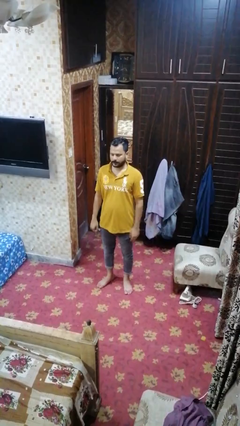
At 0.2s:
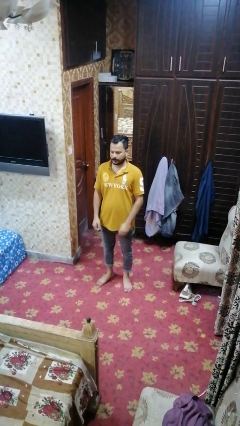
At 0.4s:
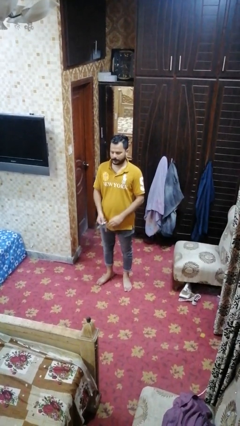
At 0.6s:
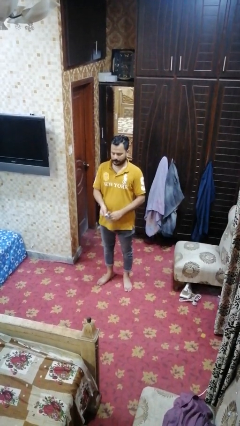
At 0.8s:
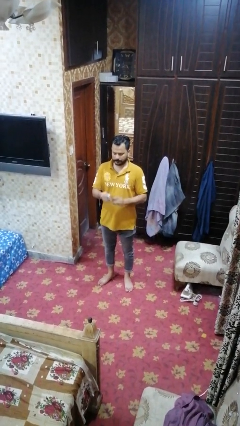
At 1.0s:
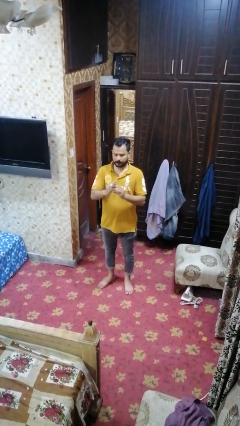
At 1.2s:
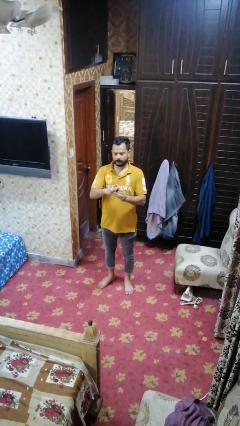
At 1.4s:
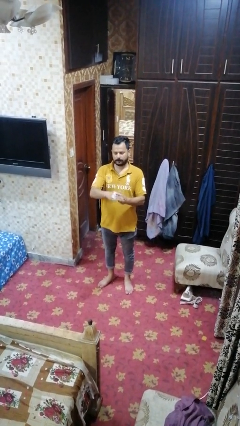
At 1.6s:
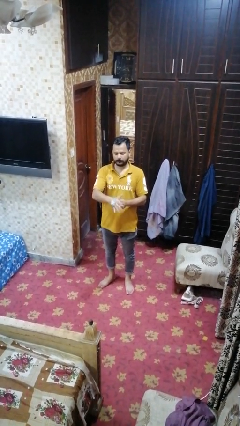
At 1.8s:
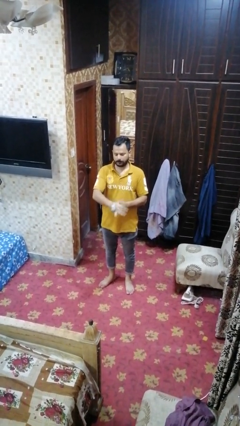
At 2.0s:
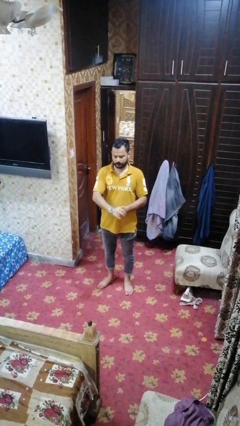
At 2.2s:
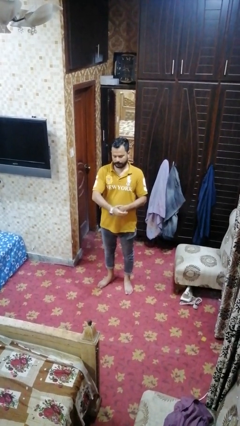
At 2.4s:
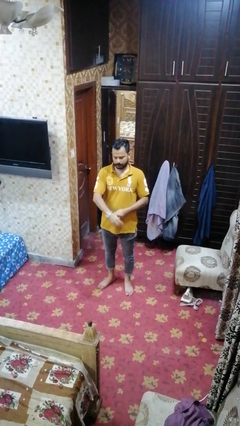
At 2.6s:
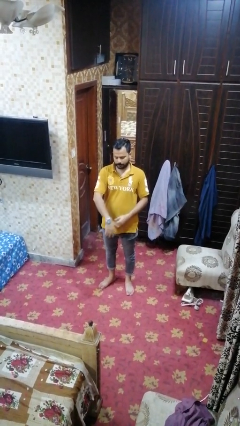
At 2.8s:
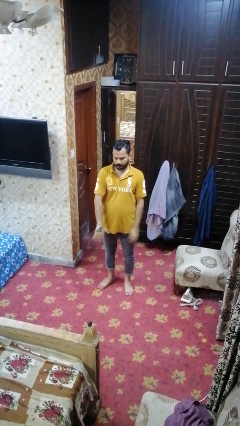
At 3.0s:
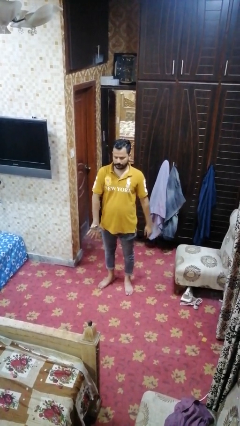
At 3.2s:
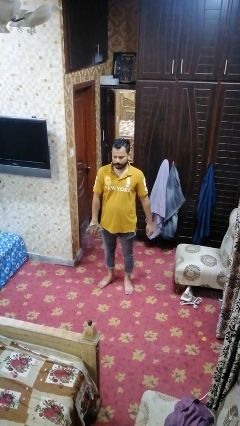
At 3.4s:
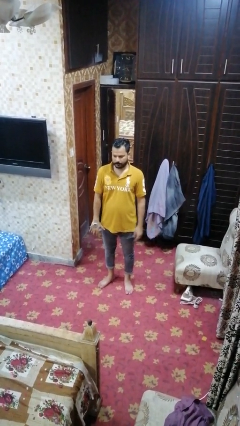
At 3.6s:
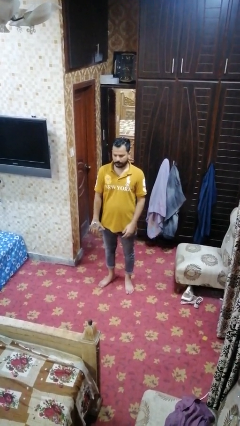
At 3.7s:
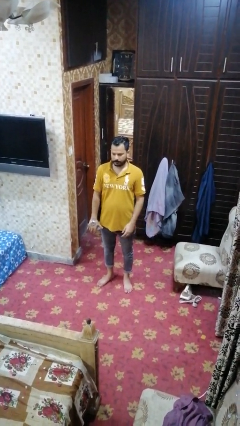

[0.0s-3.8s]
person puts on wristwatch

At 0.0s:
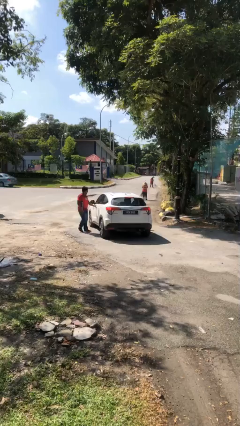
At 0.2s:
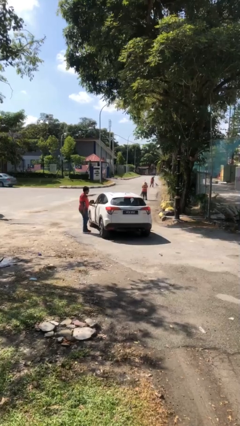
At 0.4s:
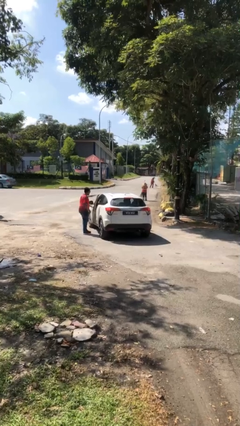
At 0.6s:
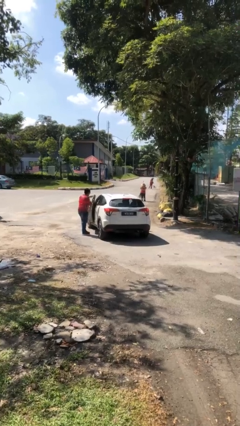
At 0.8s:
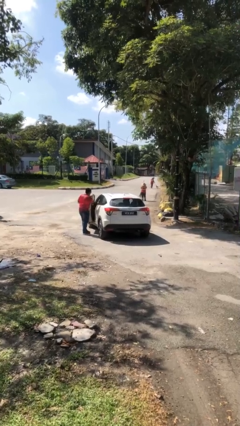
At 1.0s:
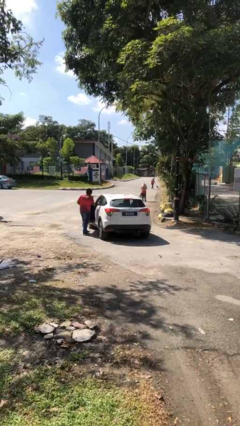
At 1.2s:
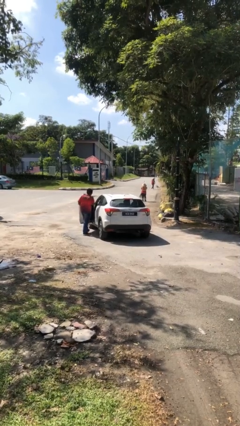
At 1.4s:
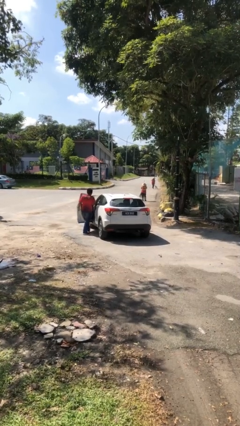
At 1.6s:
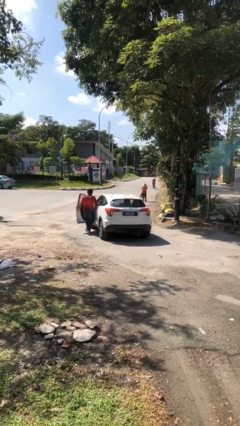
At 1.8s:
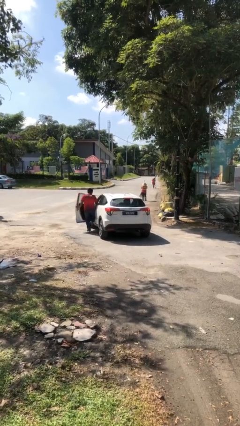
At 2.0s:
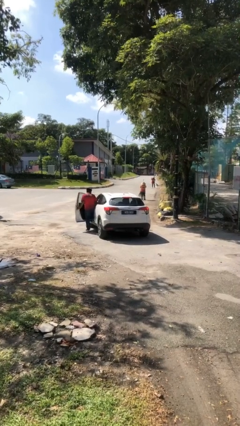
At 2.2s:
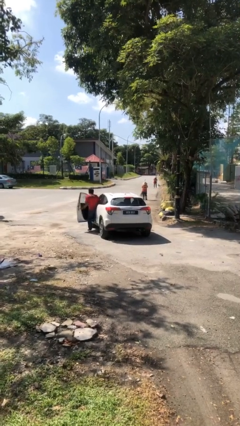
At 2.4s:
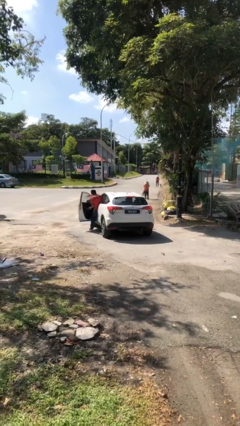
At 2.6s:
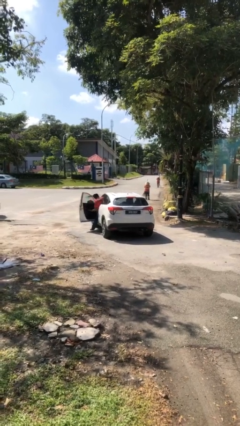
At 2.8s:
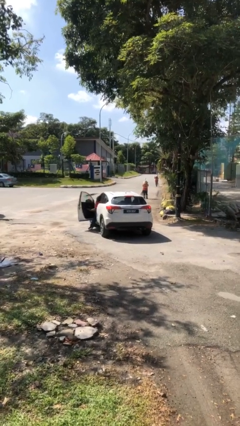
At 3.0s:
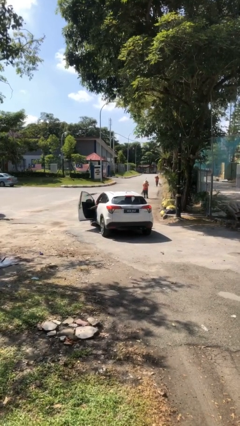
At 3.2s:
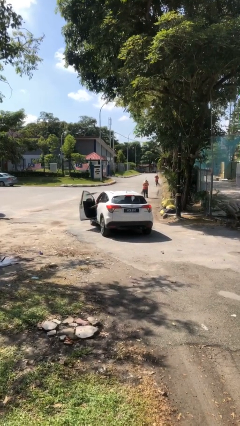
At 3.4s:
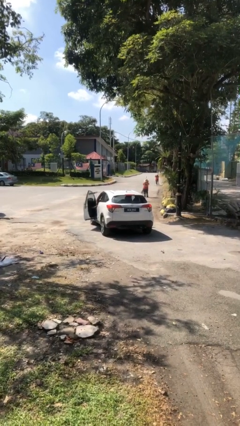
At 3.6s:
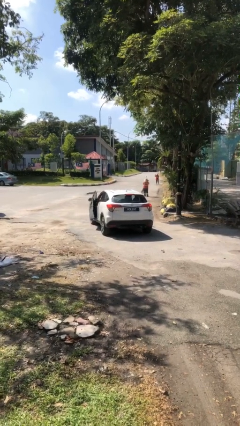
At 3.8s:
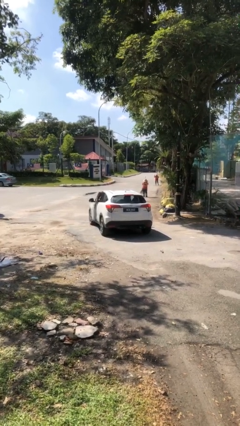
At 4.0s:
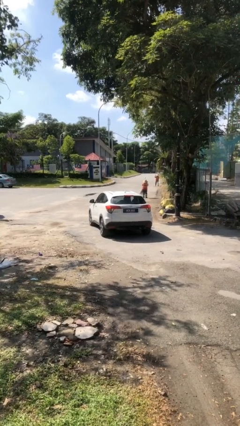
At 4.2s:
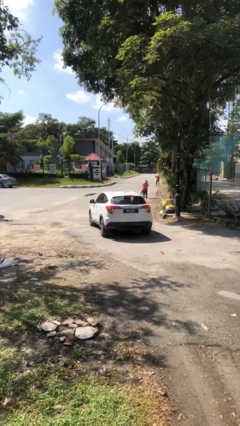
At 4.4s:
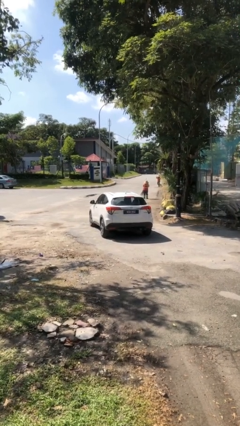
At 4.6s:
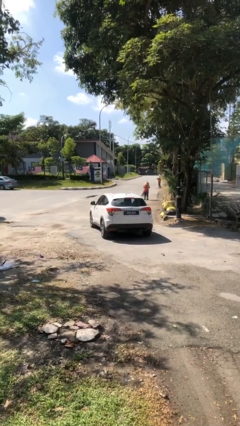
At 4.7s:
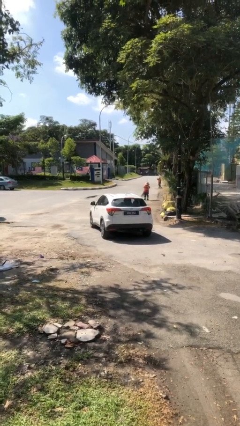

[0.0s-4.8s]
car picks up person

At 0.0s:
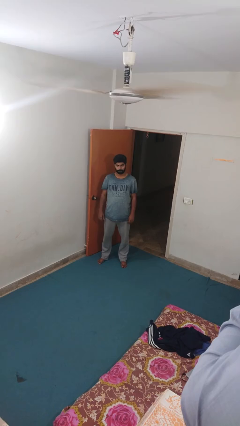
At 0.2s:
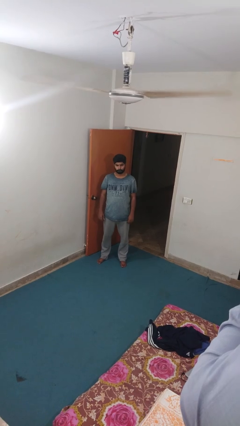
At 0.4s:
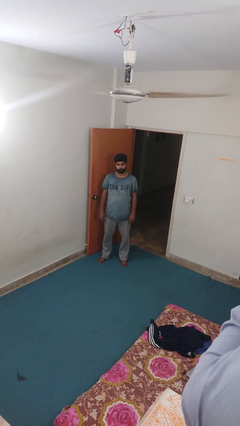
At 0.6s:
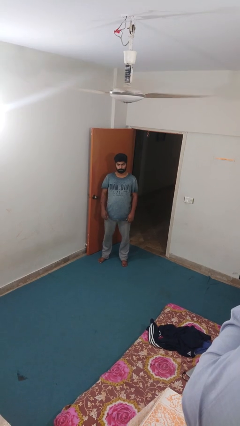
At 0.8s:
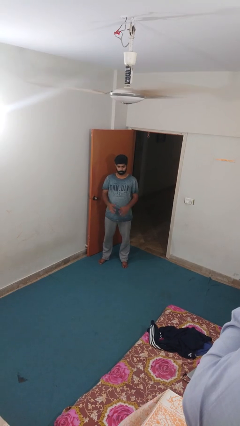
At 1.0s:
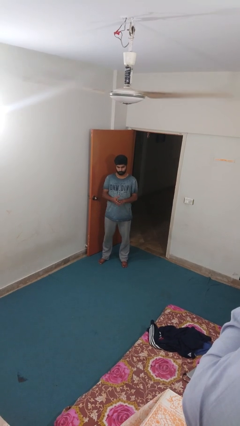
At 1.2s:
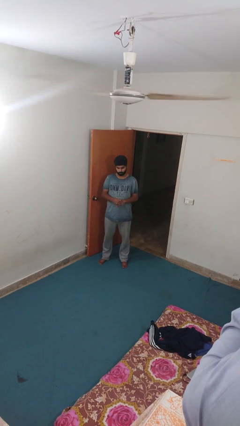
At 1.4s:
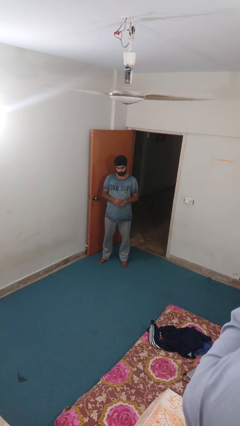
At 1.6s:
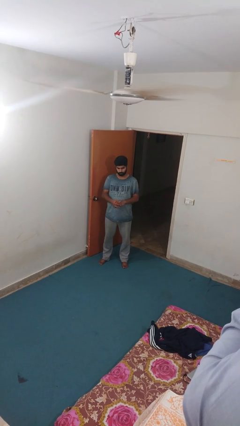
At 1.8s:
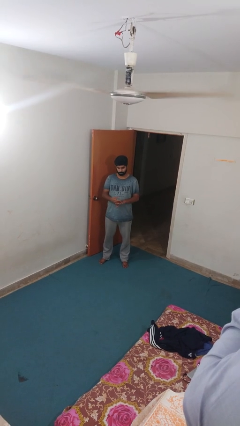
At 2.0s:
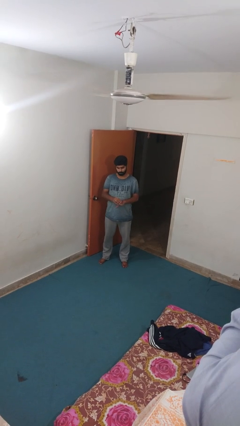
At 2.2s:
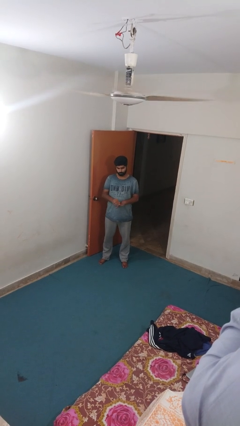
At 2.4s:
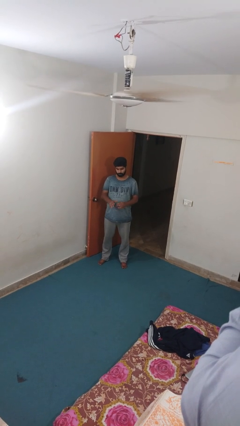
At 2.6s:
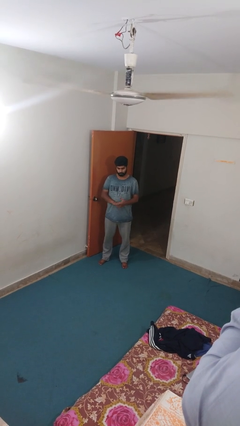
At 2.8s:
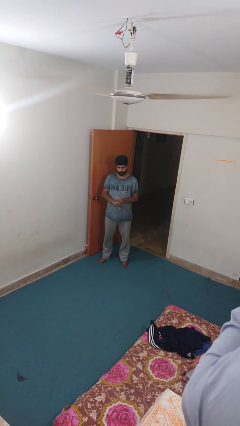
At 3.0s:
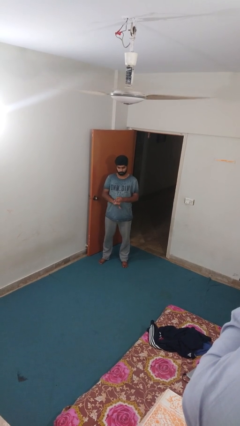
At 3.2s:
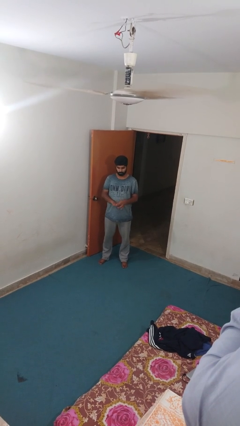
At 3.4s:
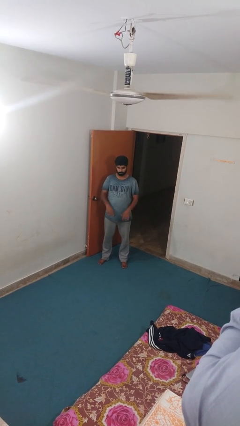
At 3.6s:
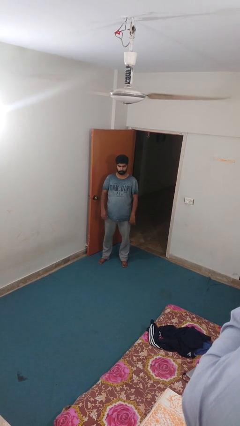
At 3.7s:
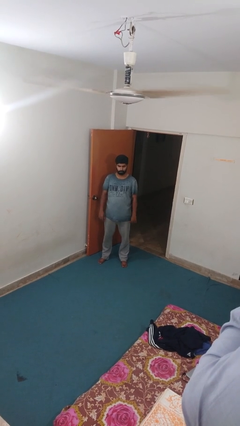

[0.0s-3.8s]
person snaps fingers

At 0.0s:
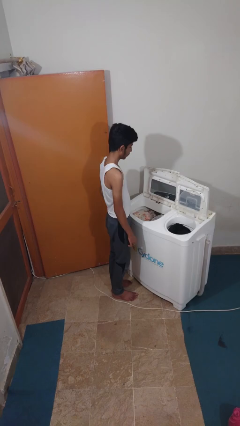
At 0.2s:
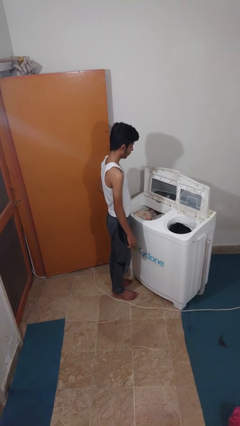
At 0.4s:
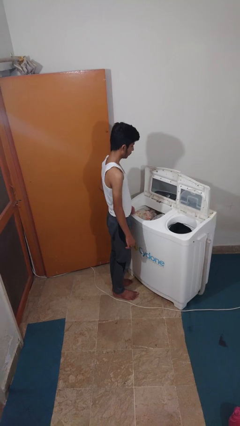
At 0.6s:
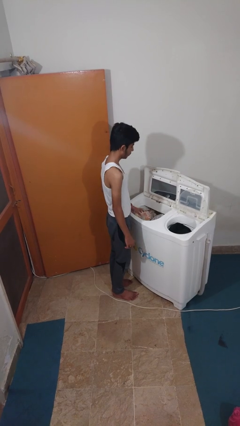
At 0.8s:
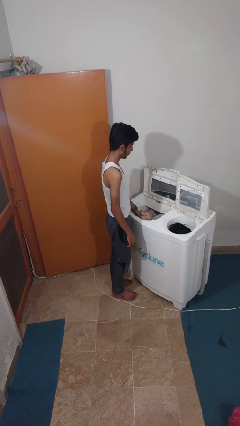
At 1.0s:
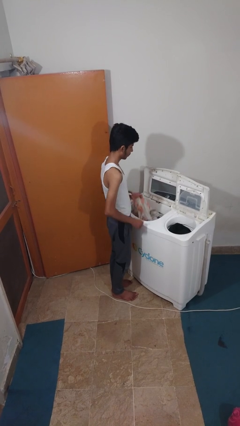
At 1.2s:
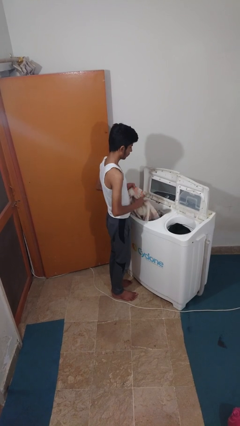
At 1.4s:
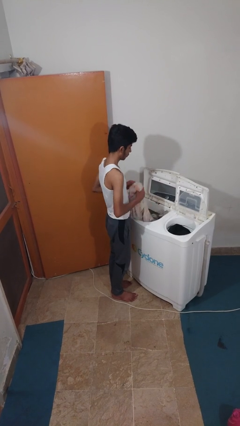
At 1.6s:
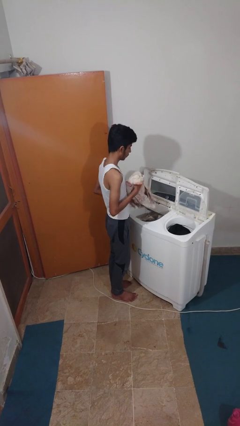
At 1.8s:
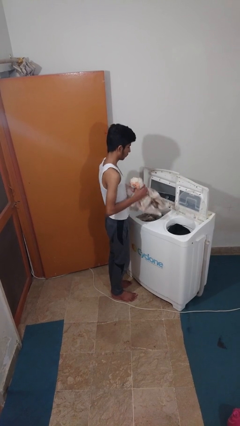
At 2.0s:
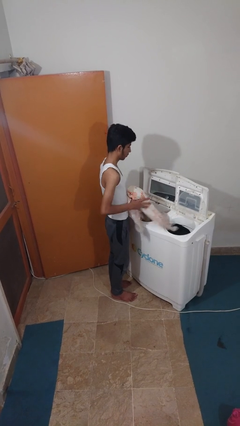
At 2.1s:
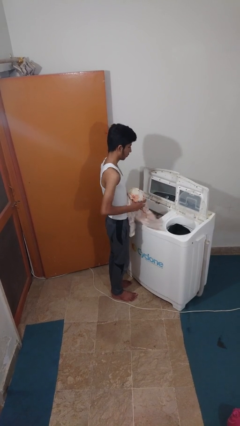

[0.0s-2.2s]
person unloads clotheswasher

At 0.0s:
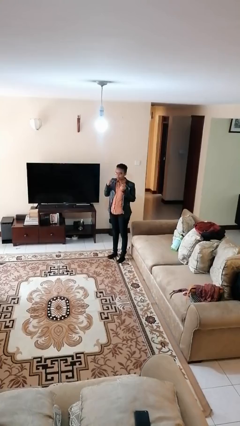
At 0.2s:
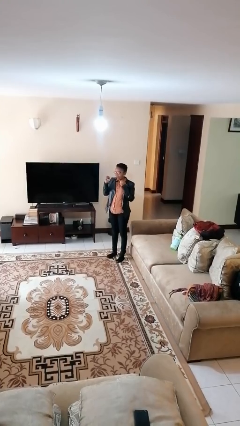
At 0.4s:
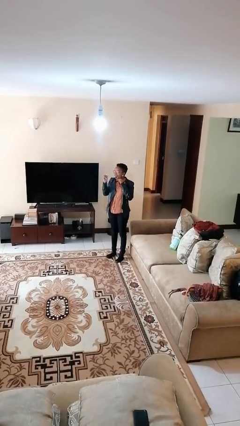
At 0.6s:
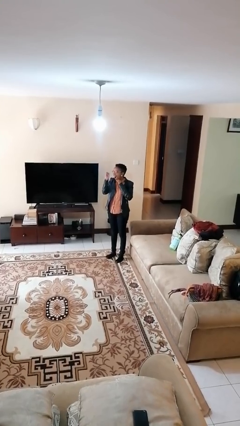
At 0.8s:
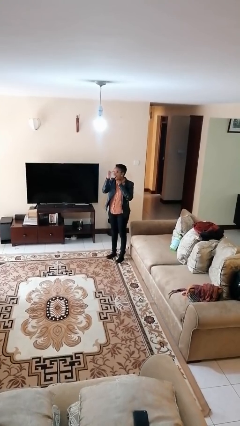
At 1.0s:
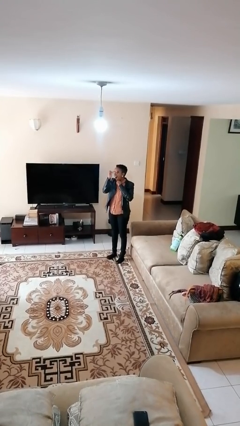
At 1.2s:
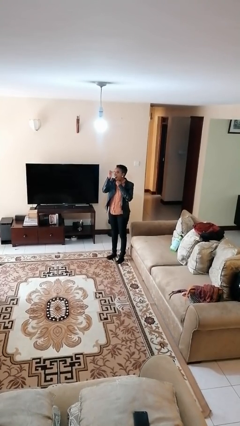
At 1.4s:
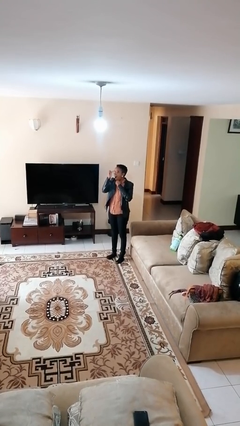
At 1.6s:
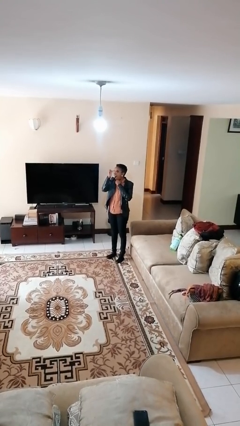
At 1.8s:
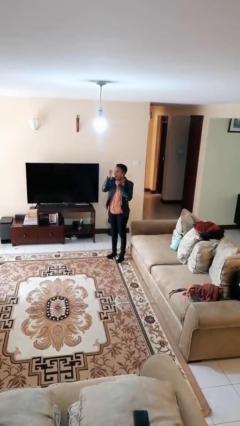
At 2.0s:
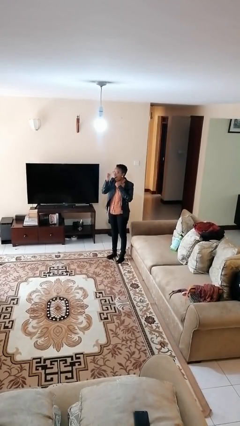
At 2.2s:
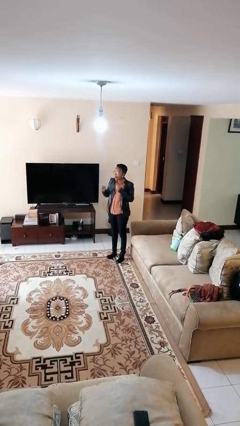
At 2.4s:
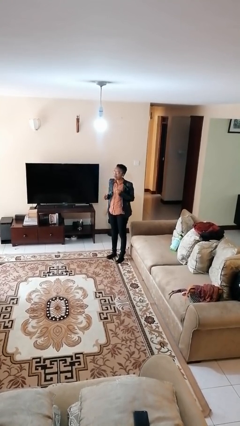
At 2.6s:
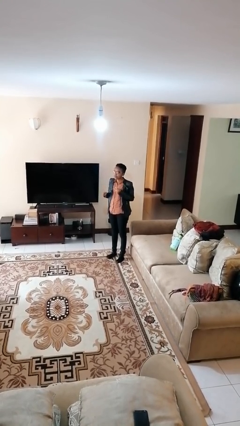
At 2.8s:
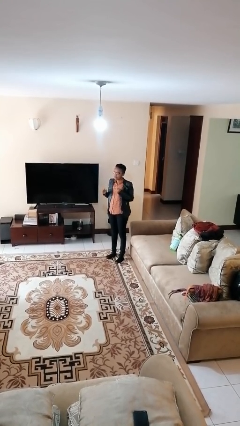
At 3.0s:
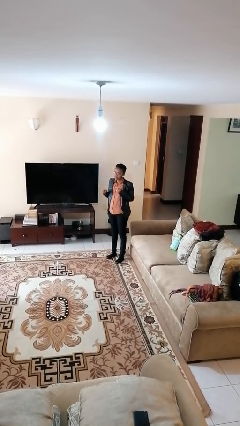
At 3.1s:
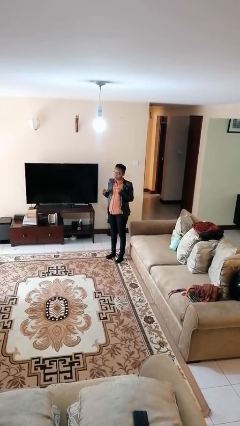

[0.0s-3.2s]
person flosses
